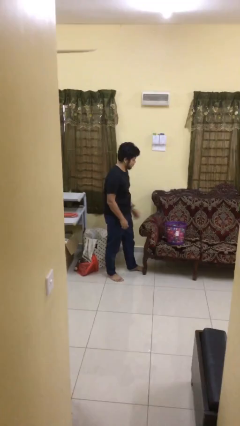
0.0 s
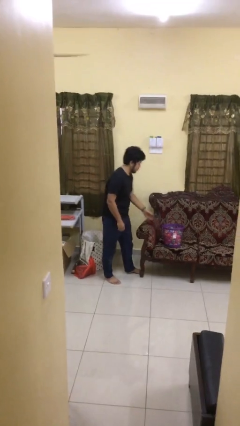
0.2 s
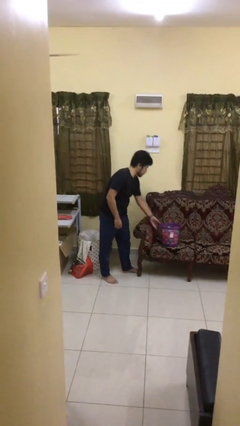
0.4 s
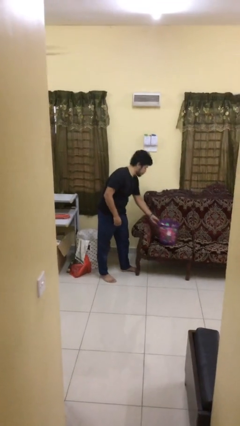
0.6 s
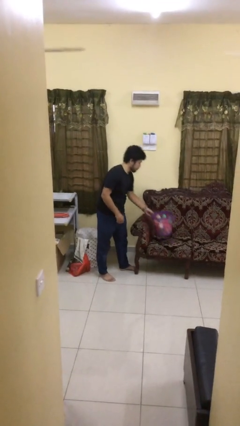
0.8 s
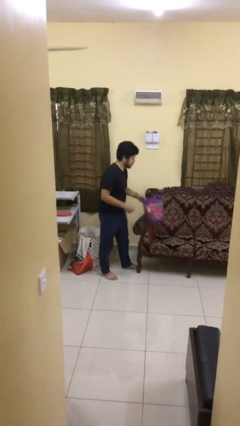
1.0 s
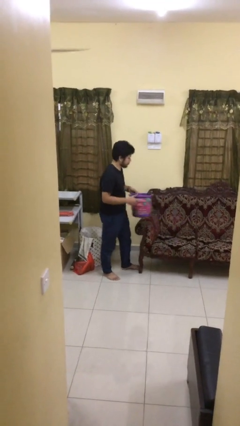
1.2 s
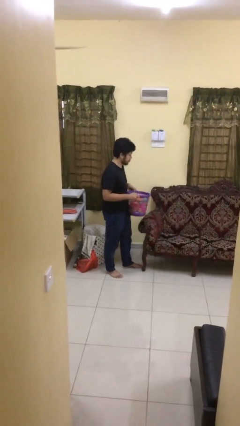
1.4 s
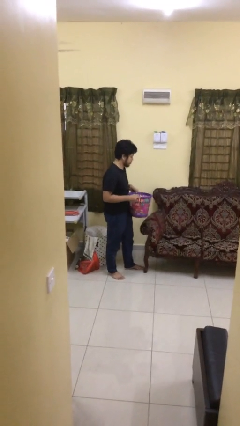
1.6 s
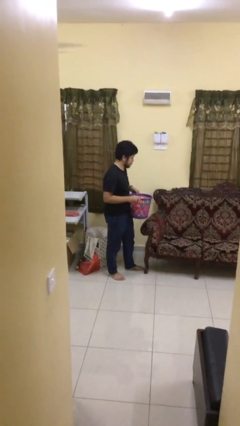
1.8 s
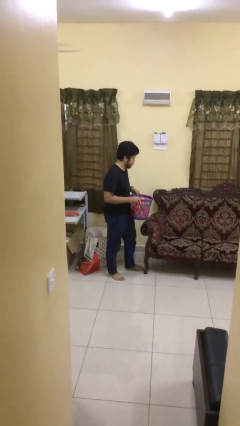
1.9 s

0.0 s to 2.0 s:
person picks up object from couch

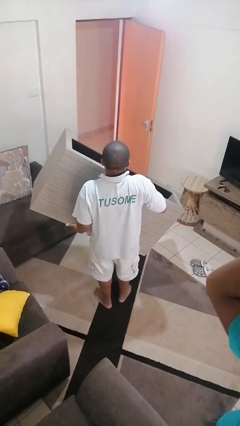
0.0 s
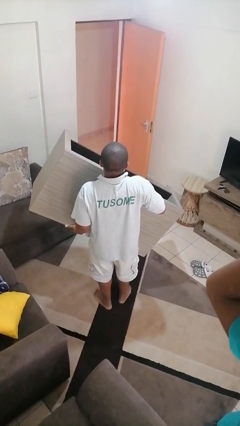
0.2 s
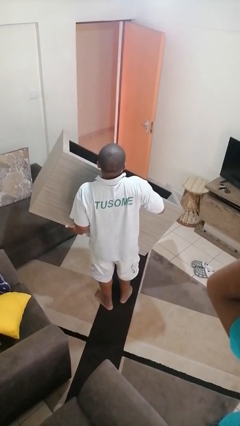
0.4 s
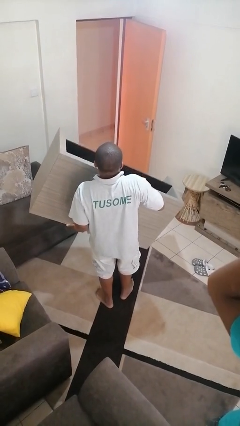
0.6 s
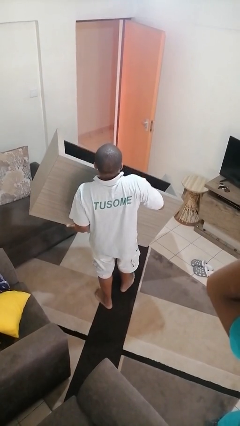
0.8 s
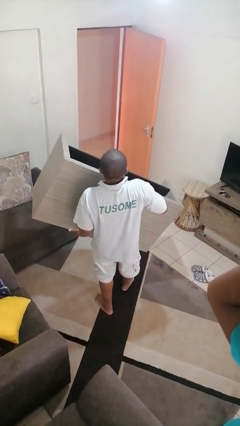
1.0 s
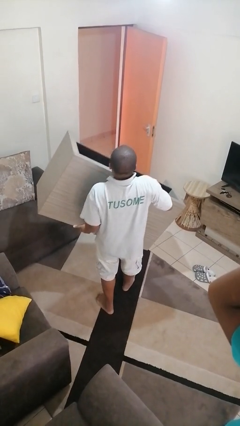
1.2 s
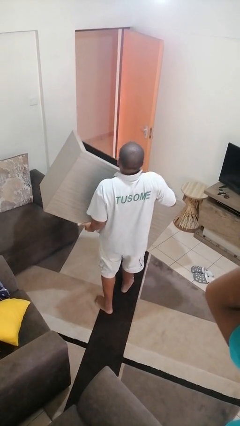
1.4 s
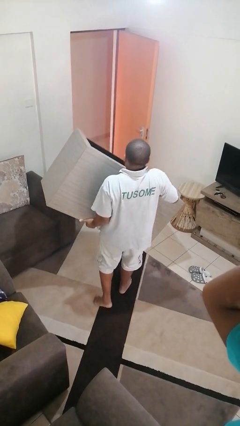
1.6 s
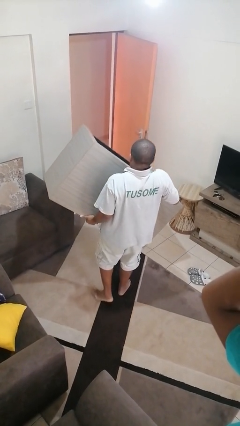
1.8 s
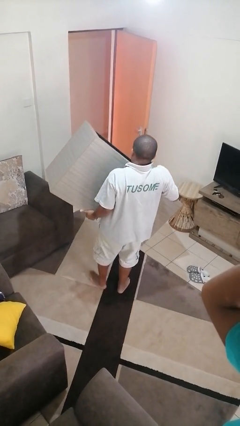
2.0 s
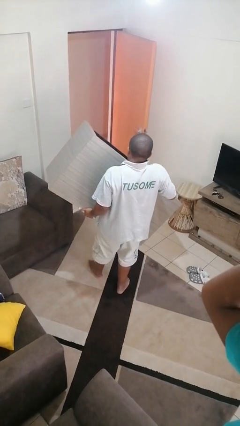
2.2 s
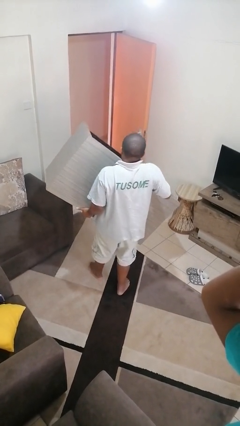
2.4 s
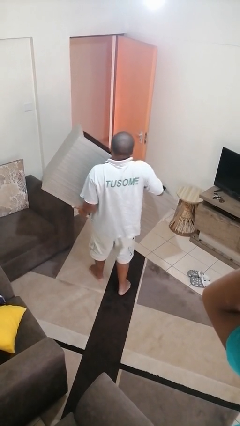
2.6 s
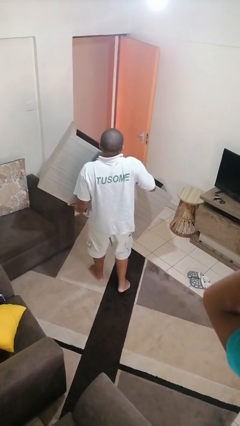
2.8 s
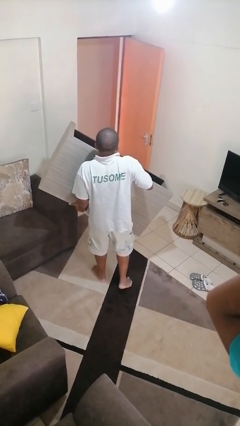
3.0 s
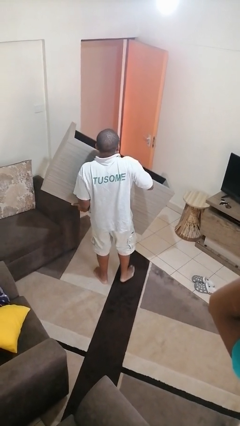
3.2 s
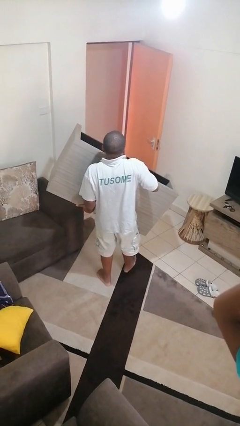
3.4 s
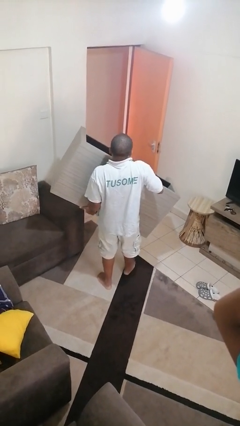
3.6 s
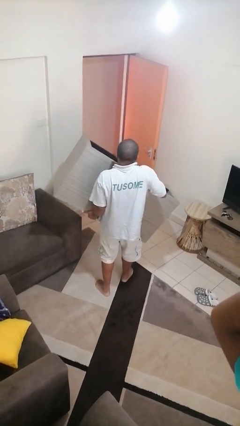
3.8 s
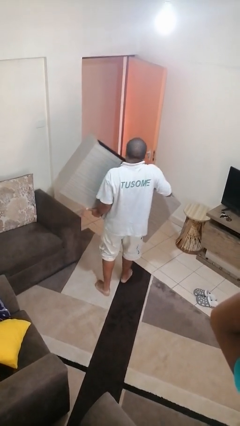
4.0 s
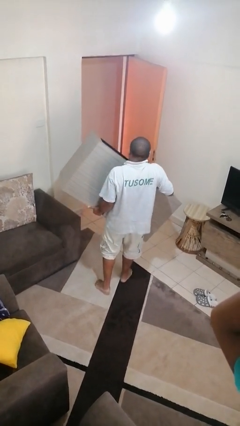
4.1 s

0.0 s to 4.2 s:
person carries furniture

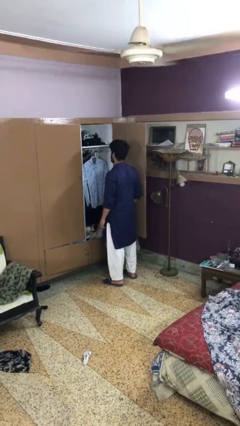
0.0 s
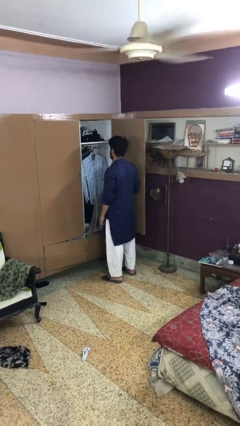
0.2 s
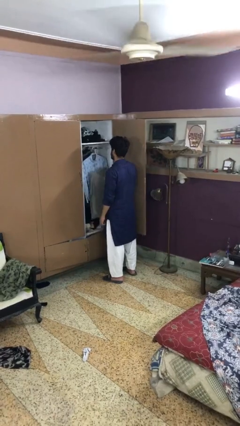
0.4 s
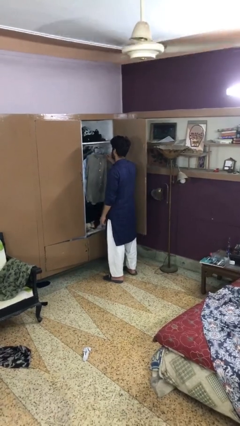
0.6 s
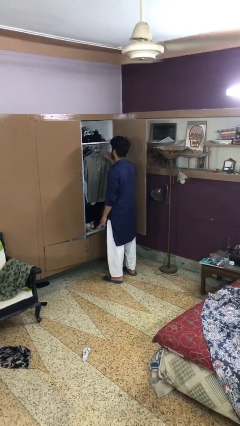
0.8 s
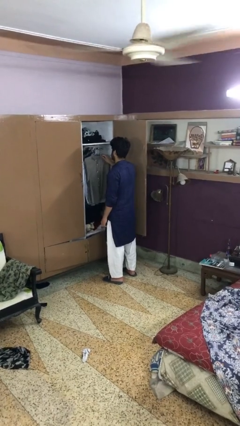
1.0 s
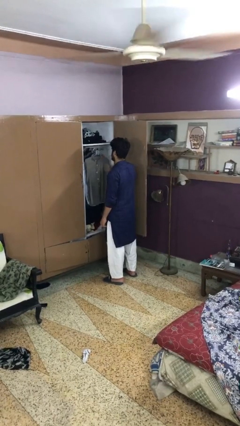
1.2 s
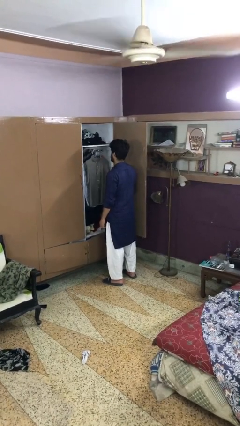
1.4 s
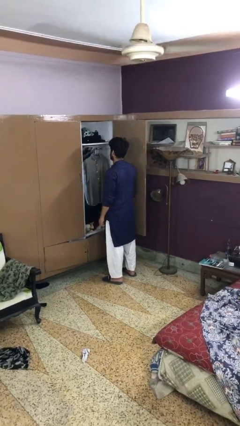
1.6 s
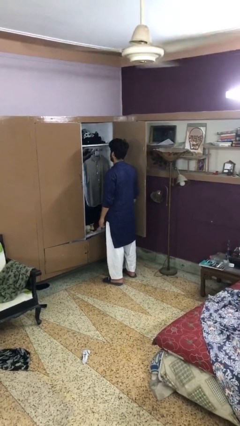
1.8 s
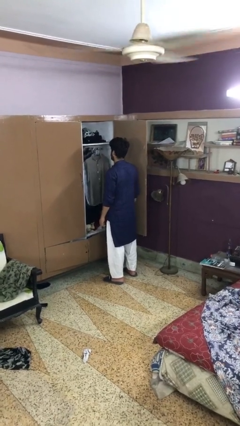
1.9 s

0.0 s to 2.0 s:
person puts clothes into closet

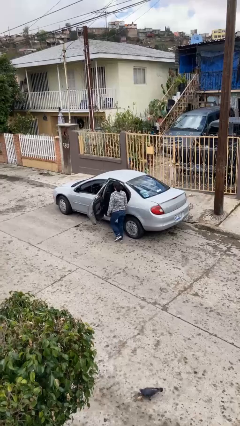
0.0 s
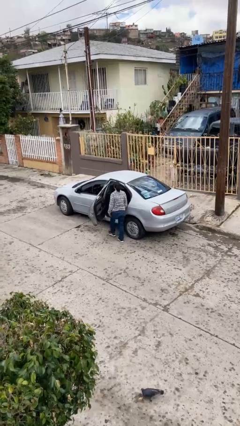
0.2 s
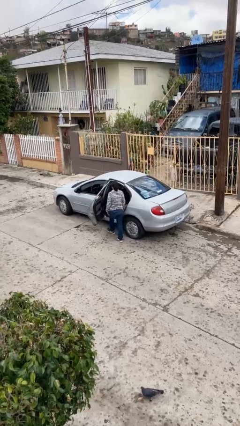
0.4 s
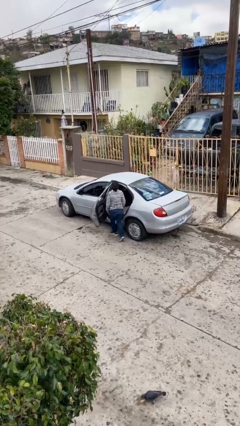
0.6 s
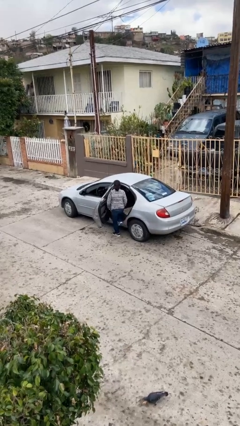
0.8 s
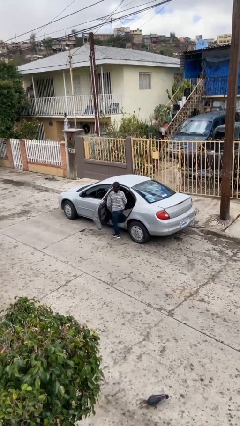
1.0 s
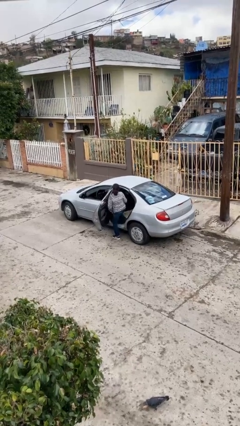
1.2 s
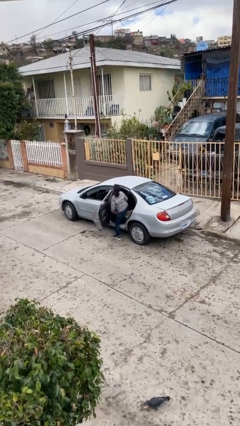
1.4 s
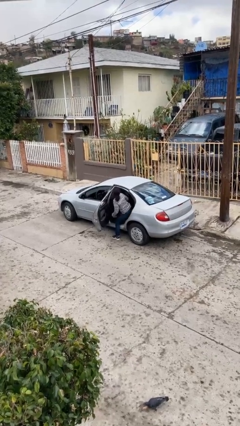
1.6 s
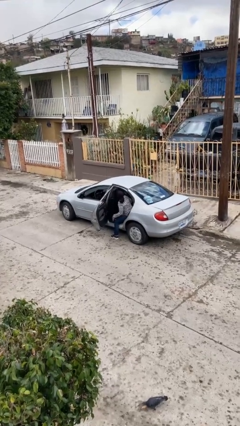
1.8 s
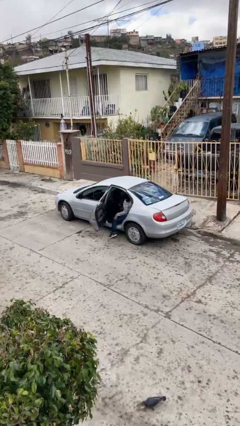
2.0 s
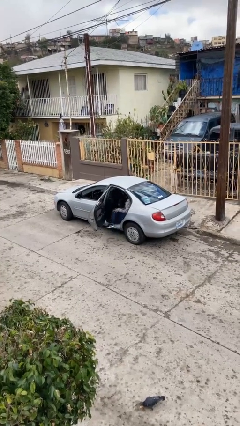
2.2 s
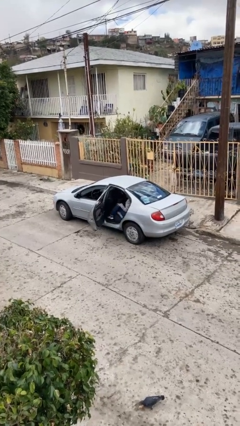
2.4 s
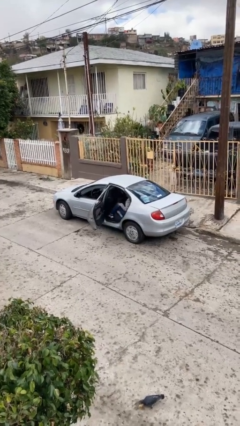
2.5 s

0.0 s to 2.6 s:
person enters car

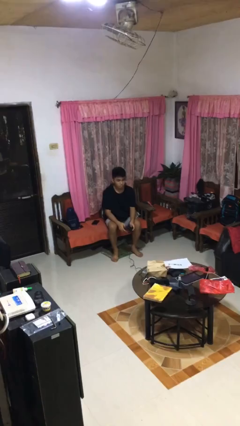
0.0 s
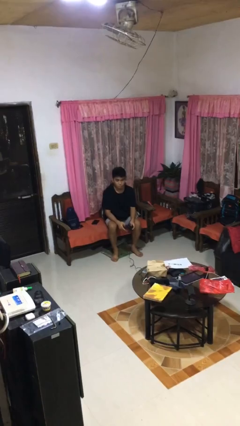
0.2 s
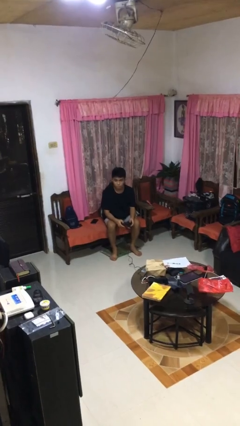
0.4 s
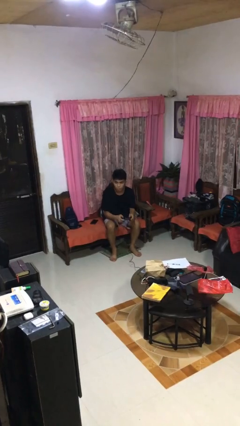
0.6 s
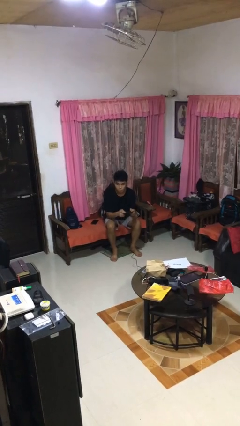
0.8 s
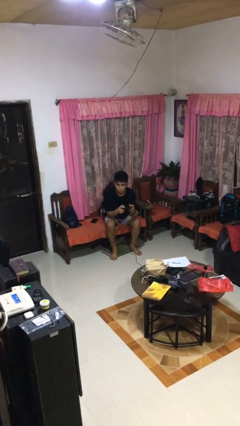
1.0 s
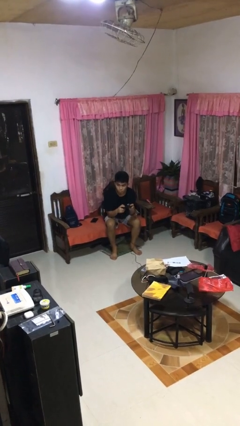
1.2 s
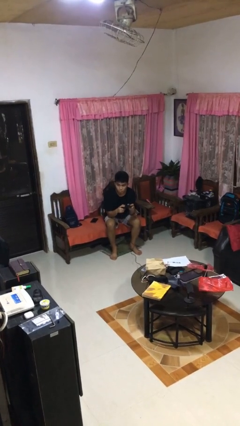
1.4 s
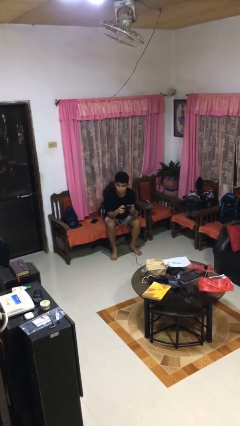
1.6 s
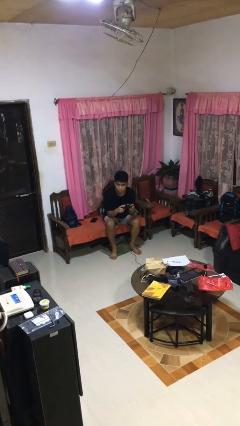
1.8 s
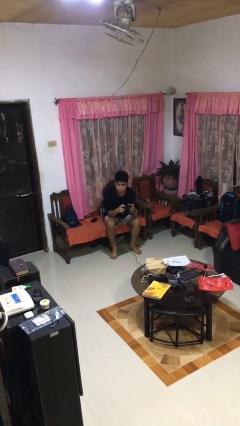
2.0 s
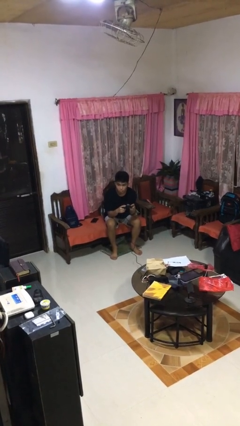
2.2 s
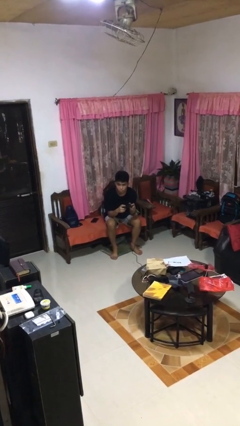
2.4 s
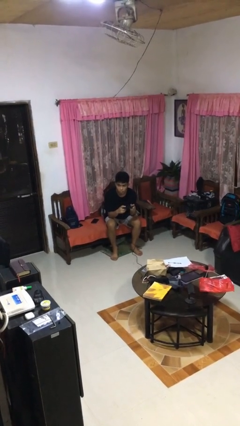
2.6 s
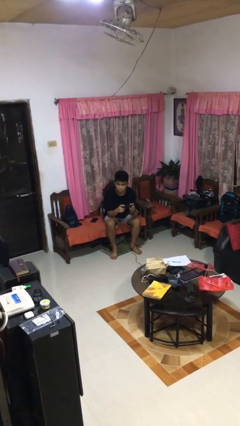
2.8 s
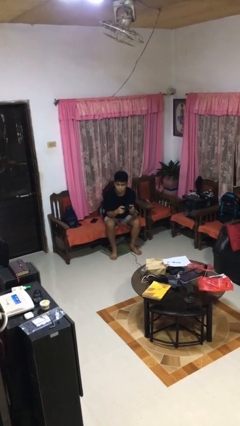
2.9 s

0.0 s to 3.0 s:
person interacts with handheld game

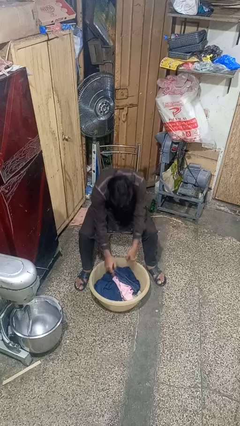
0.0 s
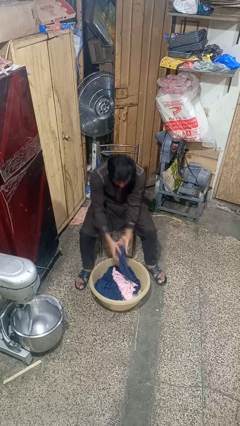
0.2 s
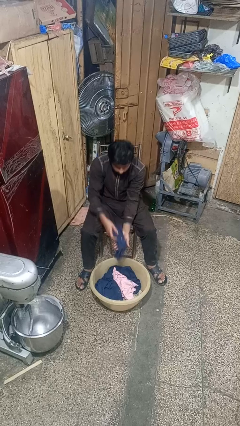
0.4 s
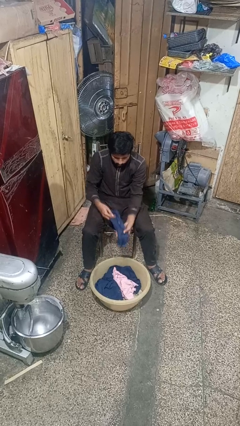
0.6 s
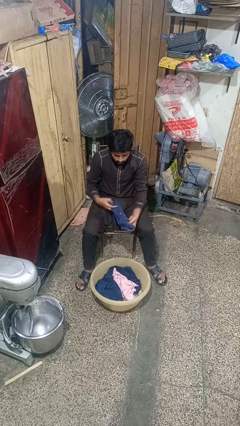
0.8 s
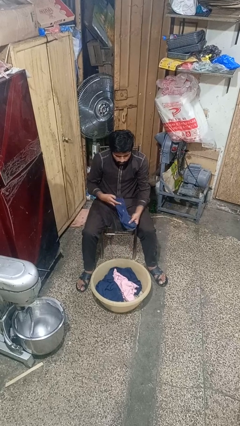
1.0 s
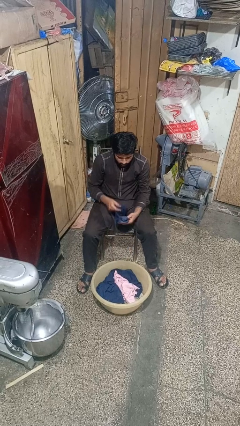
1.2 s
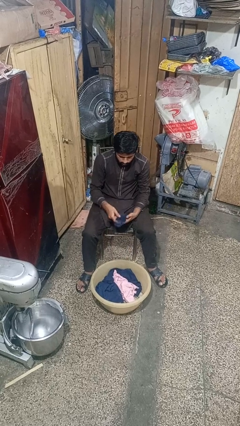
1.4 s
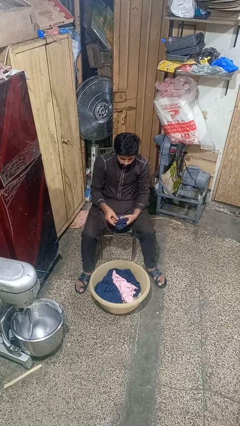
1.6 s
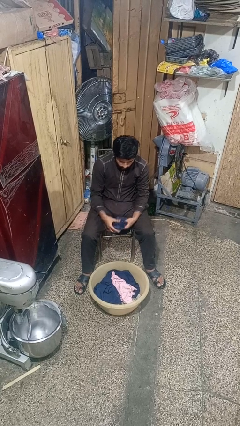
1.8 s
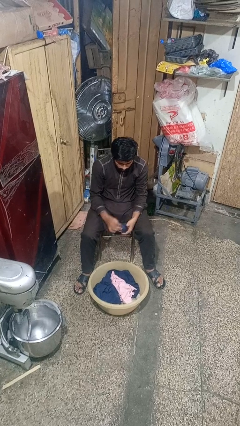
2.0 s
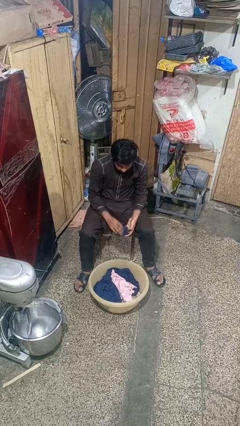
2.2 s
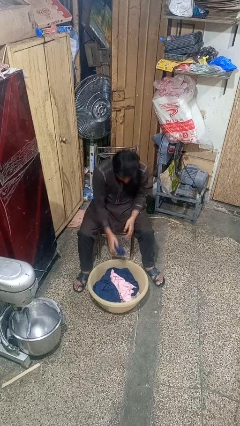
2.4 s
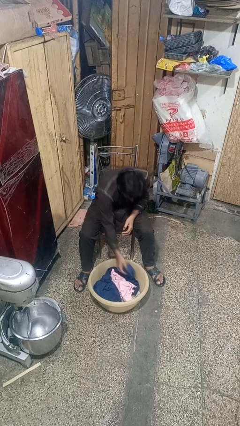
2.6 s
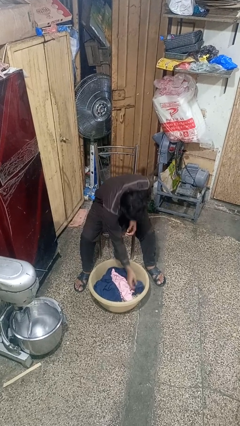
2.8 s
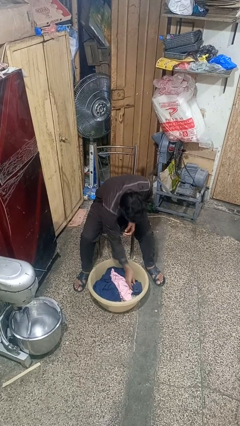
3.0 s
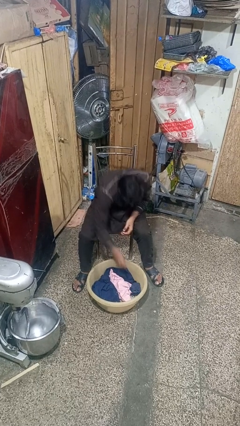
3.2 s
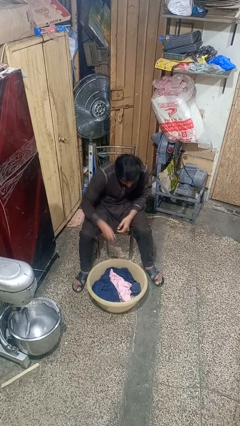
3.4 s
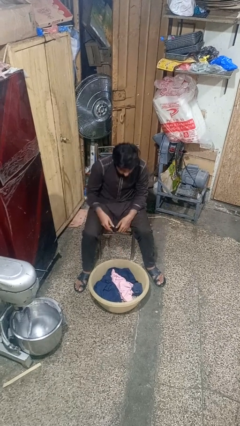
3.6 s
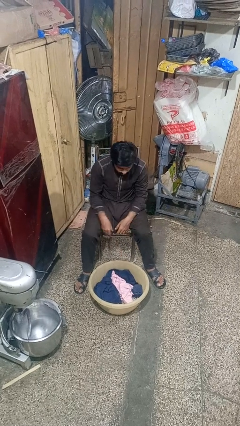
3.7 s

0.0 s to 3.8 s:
person folds socks

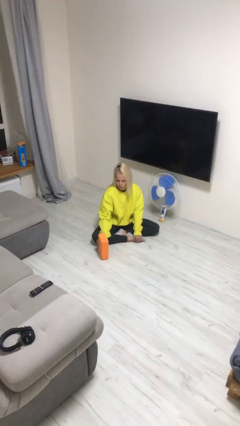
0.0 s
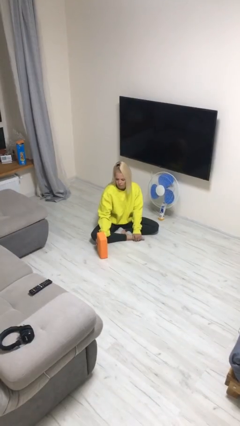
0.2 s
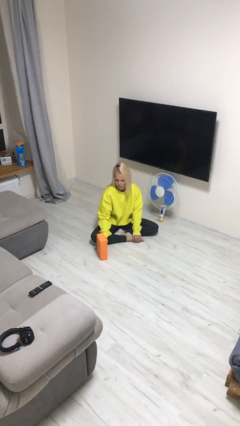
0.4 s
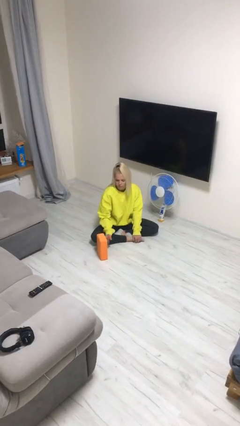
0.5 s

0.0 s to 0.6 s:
person puts down object on floor
